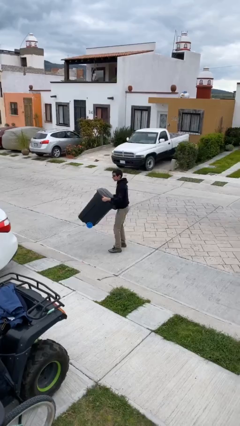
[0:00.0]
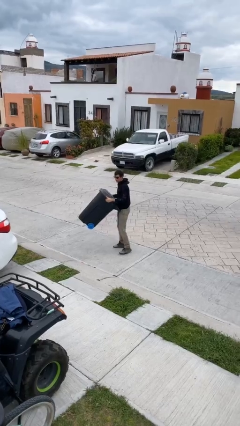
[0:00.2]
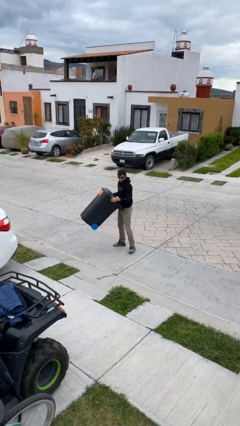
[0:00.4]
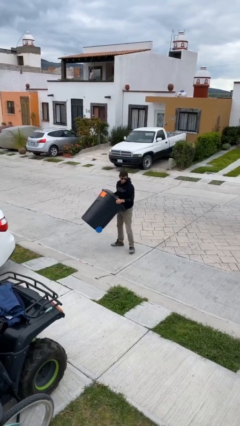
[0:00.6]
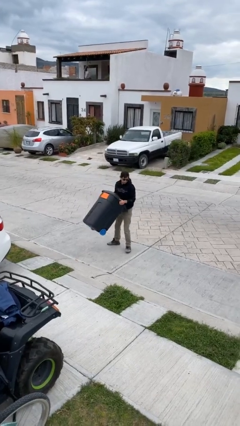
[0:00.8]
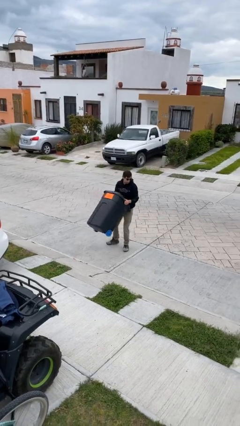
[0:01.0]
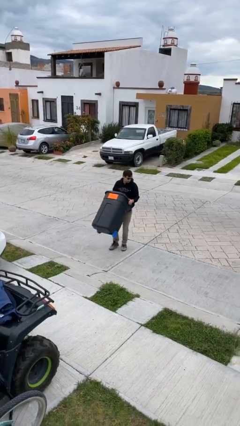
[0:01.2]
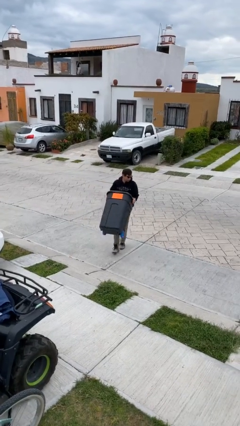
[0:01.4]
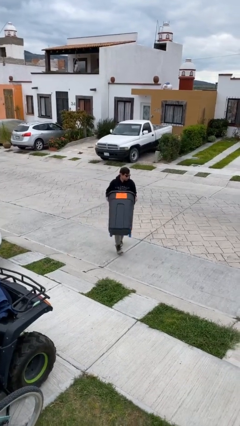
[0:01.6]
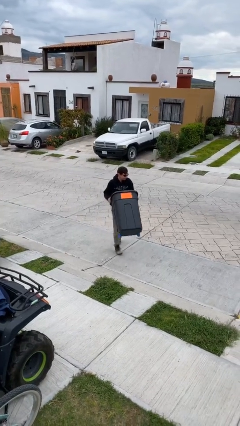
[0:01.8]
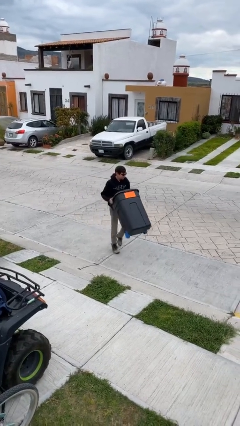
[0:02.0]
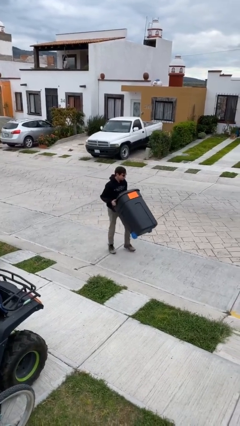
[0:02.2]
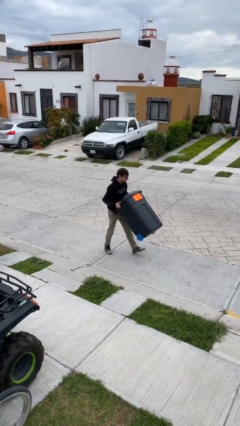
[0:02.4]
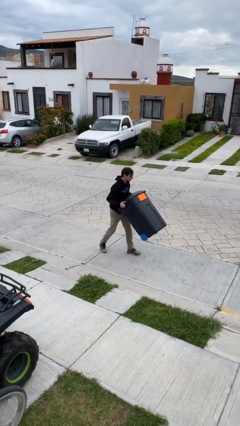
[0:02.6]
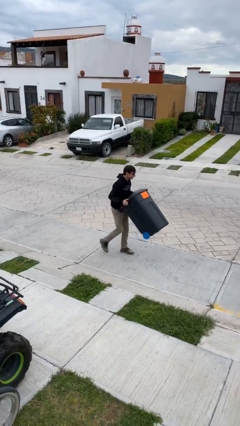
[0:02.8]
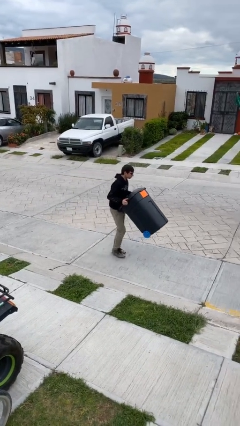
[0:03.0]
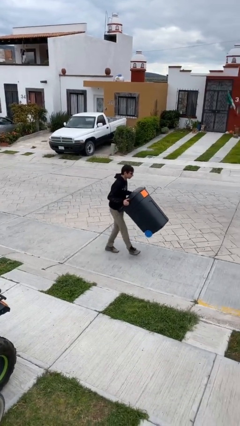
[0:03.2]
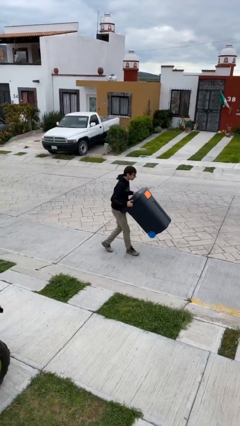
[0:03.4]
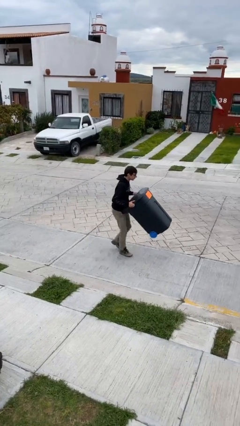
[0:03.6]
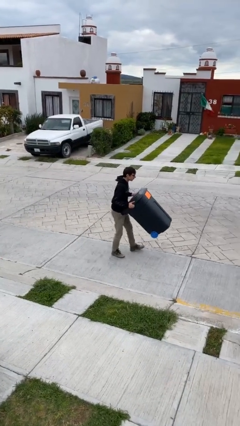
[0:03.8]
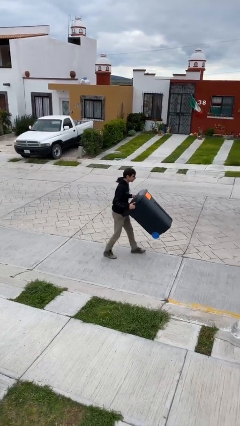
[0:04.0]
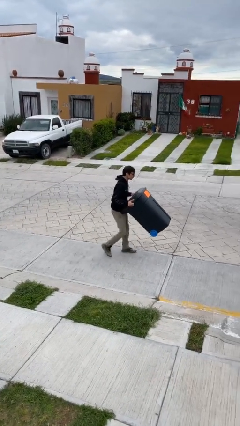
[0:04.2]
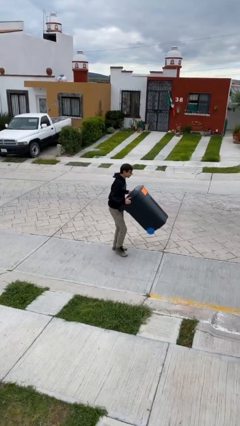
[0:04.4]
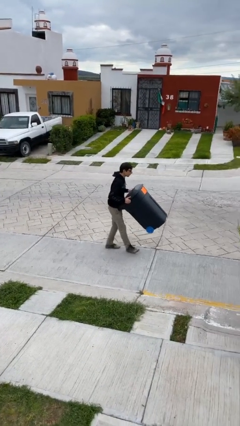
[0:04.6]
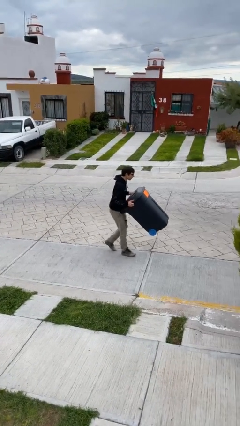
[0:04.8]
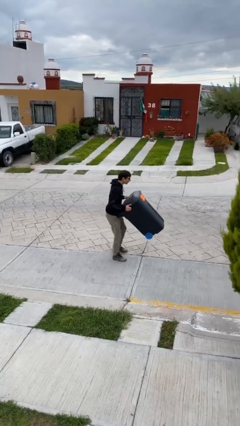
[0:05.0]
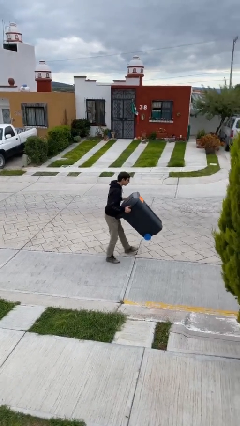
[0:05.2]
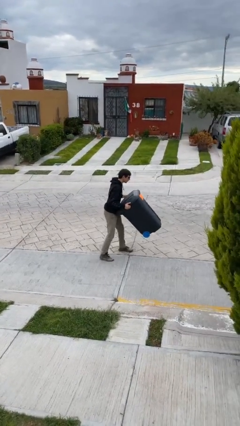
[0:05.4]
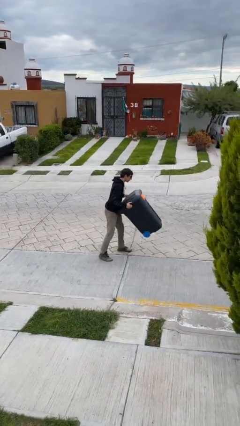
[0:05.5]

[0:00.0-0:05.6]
person carries heavy object

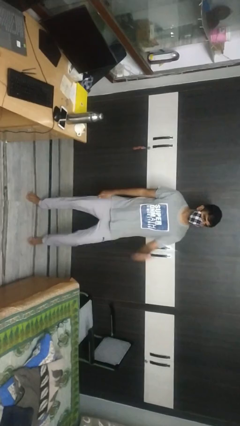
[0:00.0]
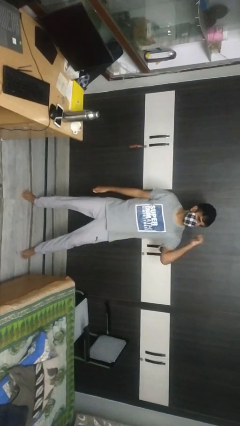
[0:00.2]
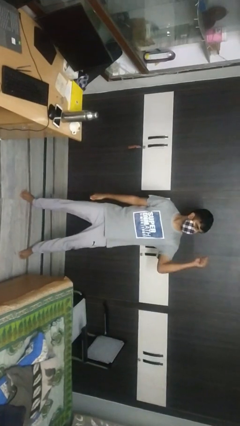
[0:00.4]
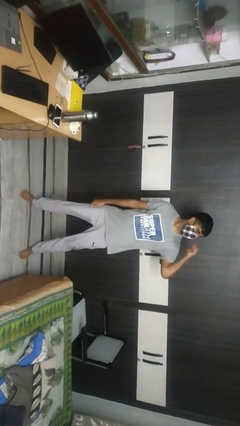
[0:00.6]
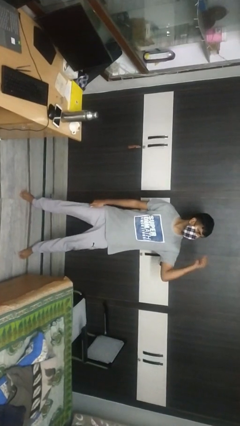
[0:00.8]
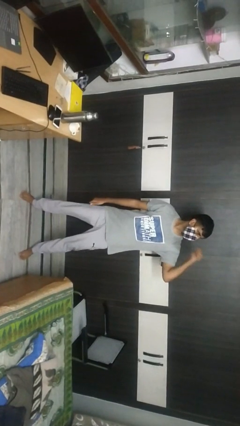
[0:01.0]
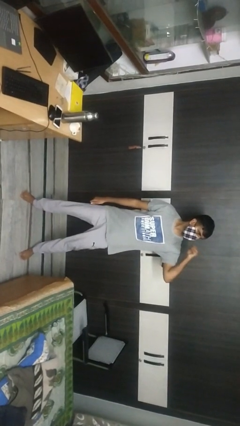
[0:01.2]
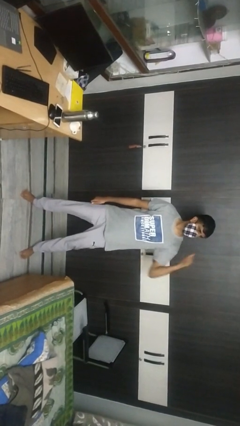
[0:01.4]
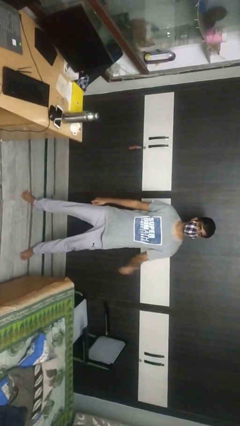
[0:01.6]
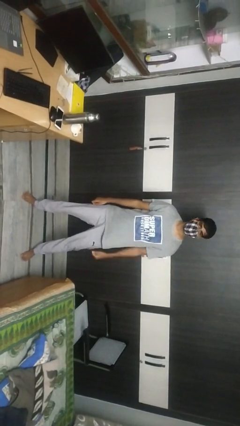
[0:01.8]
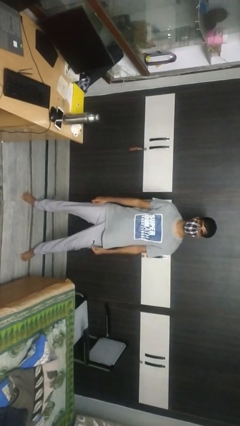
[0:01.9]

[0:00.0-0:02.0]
person gestures behind me

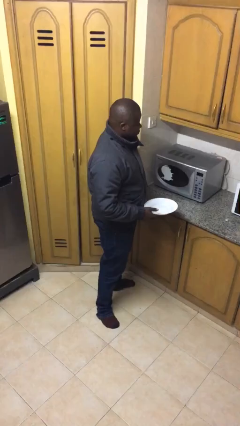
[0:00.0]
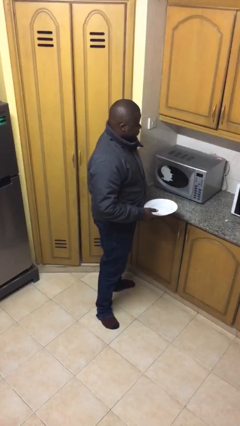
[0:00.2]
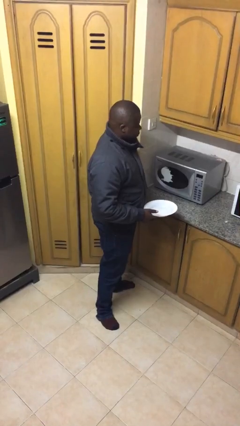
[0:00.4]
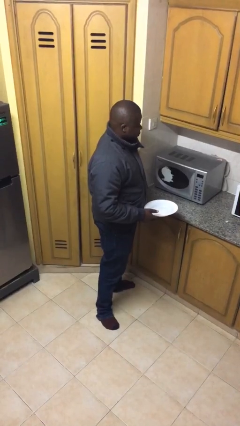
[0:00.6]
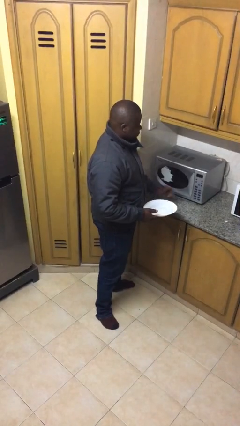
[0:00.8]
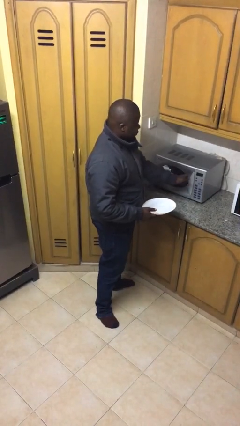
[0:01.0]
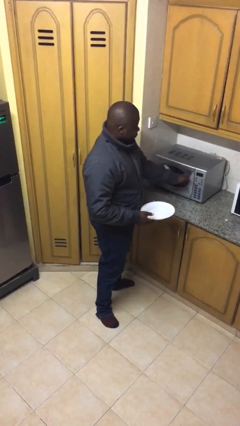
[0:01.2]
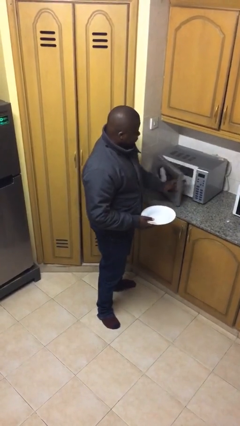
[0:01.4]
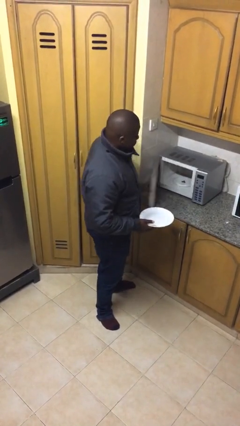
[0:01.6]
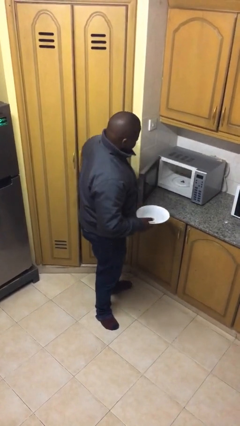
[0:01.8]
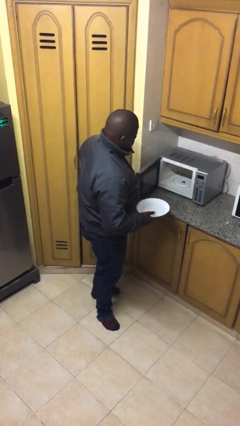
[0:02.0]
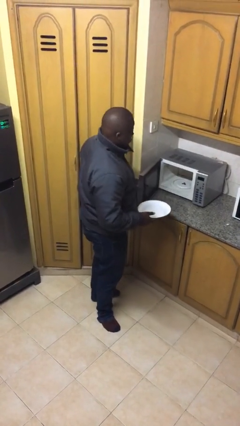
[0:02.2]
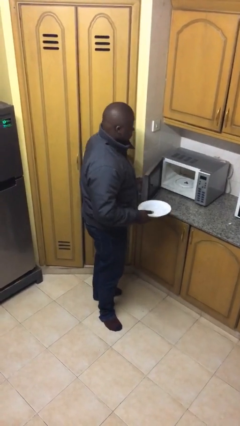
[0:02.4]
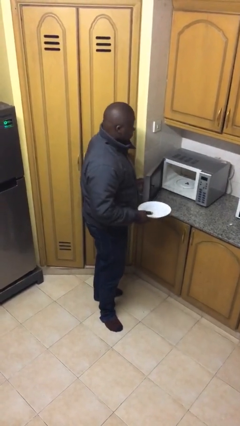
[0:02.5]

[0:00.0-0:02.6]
person opens microwave

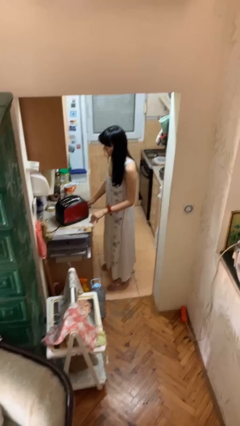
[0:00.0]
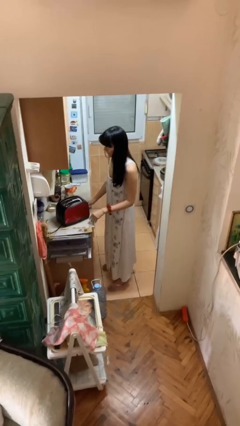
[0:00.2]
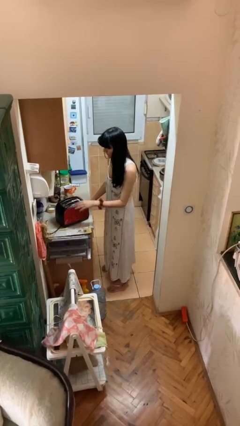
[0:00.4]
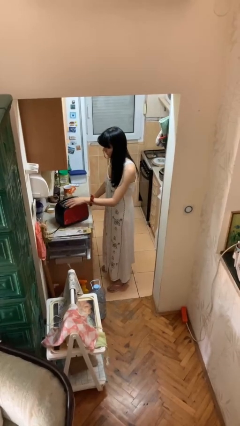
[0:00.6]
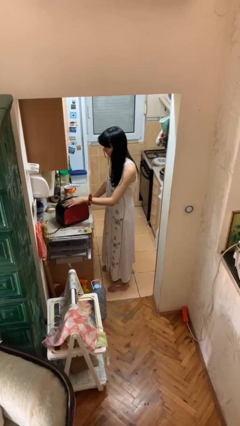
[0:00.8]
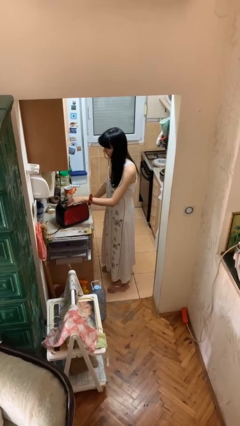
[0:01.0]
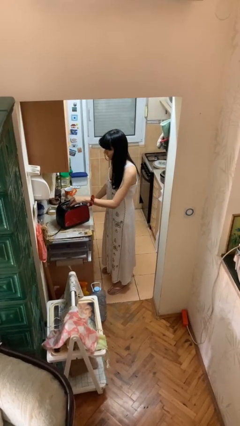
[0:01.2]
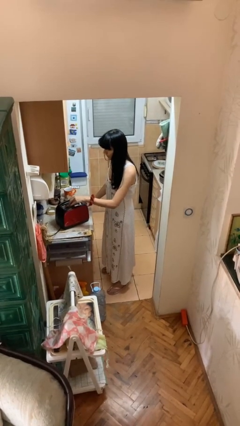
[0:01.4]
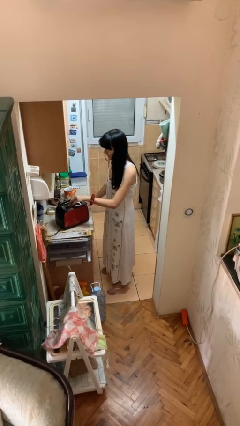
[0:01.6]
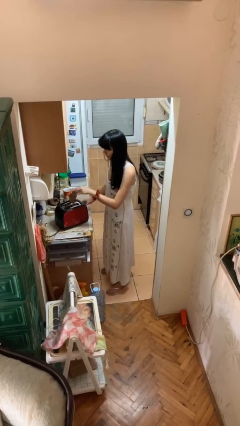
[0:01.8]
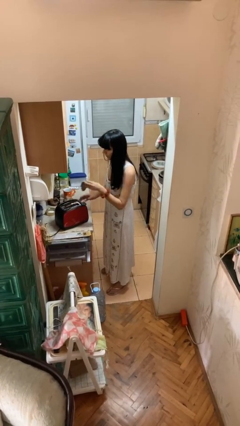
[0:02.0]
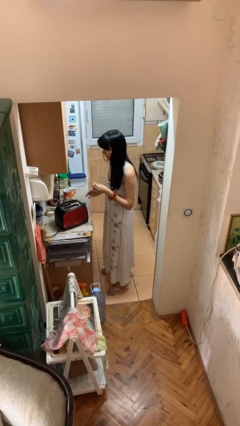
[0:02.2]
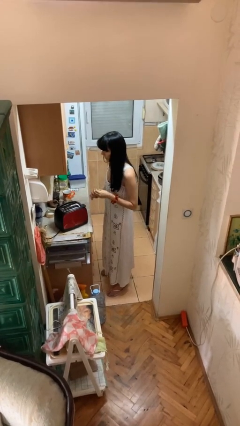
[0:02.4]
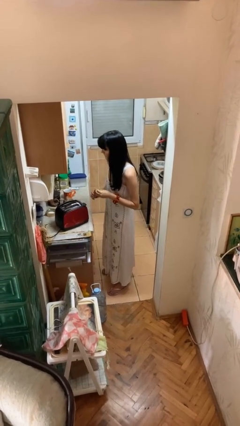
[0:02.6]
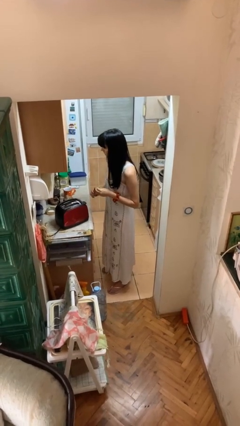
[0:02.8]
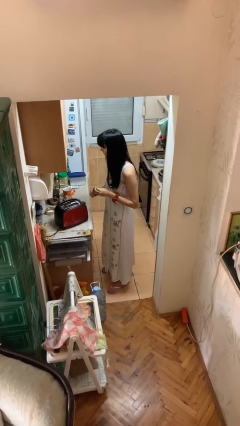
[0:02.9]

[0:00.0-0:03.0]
person takes object from toaster

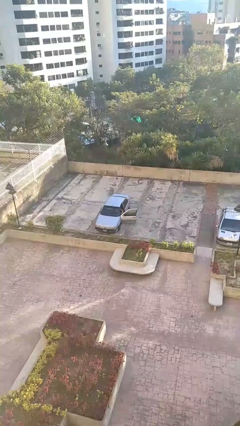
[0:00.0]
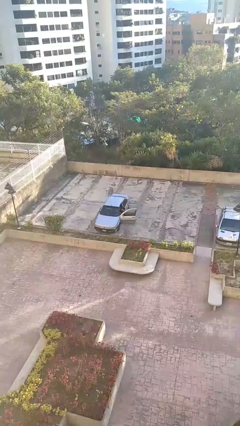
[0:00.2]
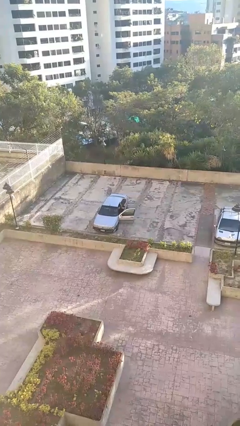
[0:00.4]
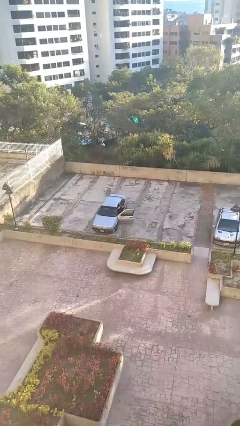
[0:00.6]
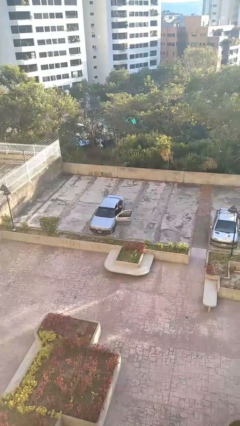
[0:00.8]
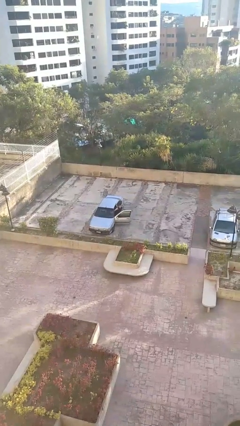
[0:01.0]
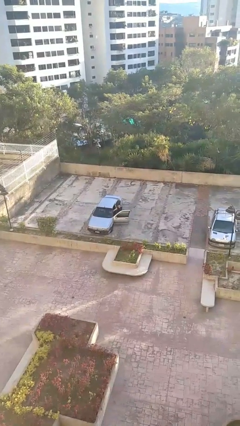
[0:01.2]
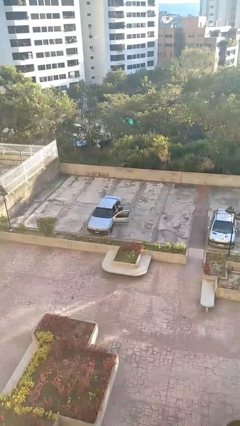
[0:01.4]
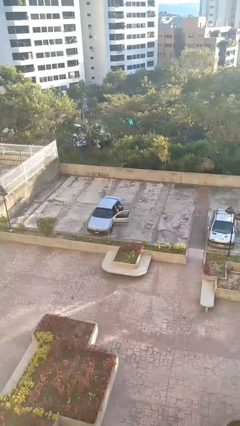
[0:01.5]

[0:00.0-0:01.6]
person exits car

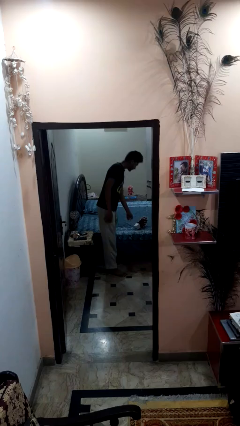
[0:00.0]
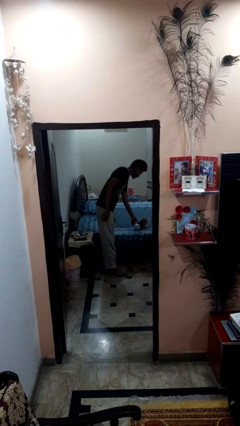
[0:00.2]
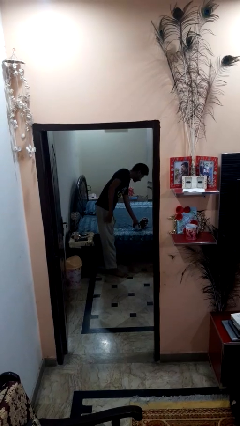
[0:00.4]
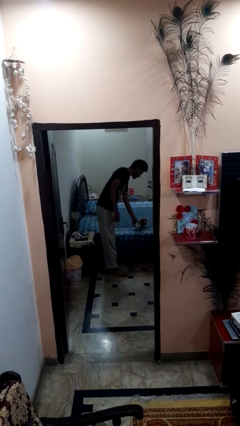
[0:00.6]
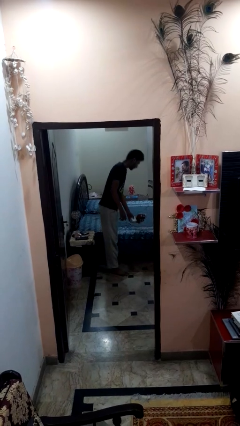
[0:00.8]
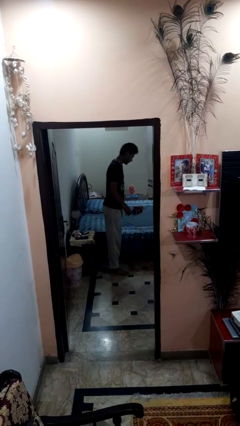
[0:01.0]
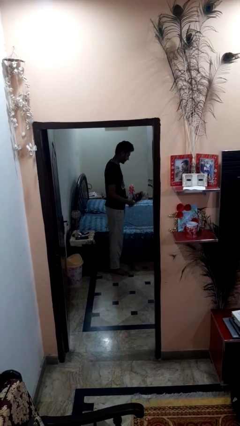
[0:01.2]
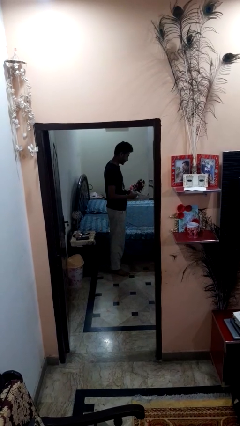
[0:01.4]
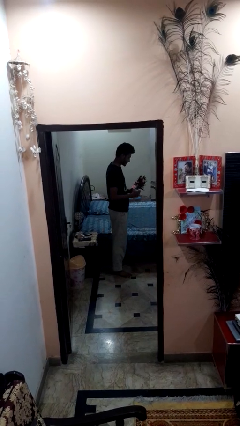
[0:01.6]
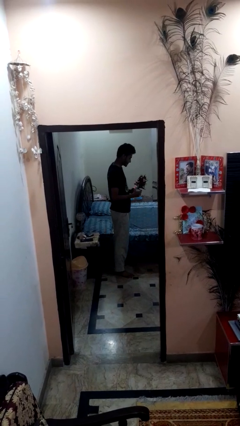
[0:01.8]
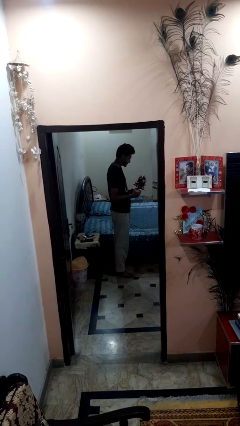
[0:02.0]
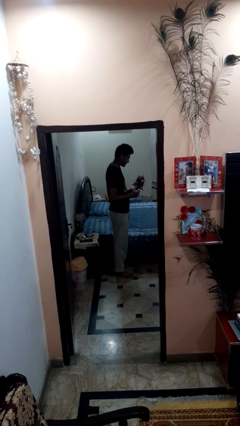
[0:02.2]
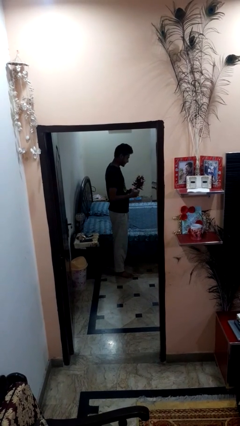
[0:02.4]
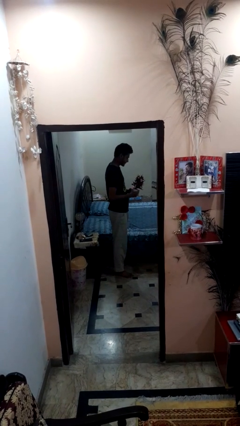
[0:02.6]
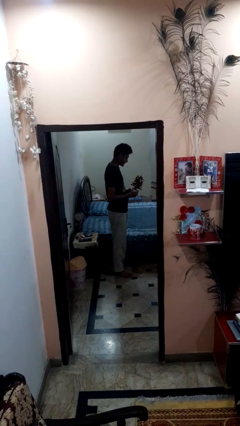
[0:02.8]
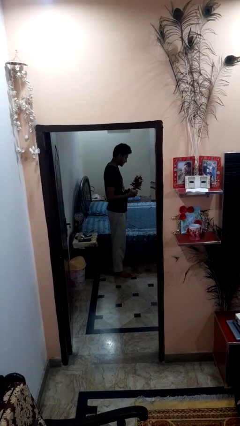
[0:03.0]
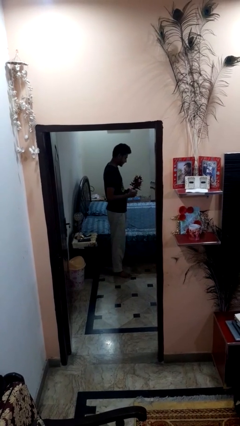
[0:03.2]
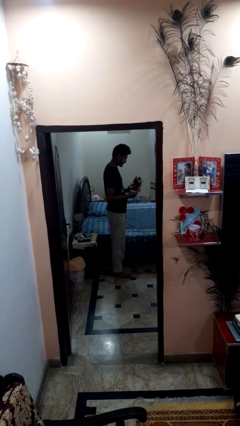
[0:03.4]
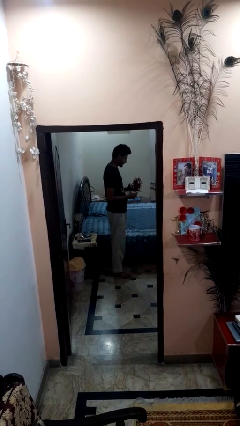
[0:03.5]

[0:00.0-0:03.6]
person picks up object from bed
